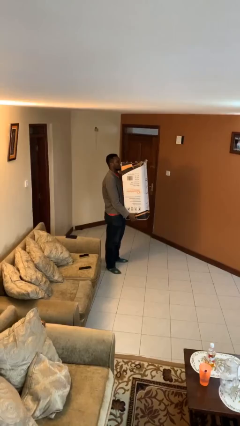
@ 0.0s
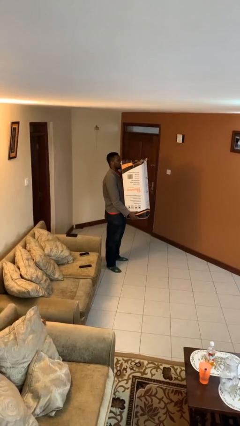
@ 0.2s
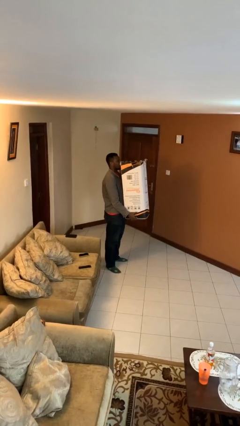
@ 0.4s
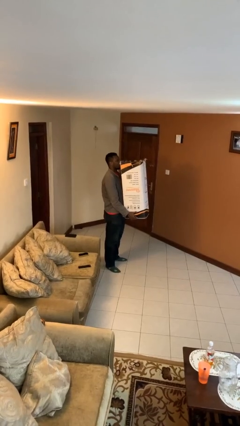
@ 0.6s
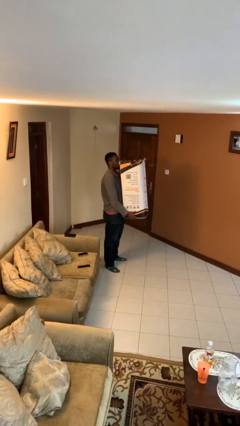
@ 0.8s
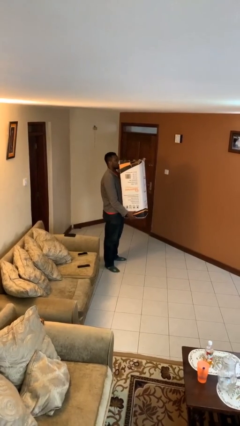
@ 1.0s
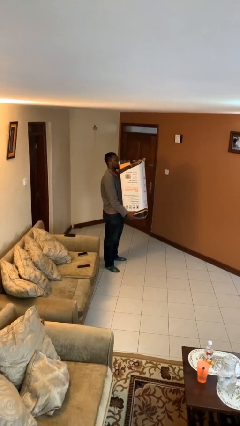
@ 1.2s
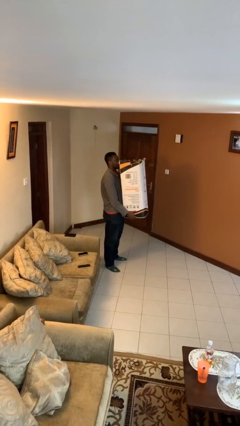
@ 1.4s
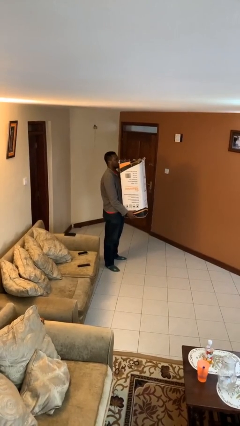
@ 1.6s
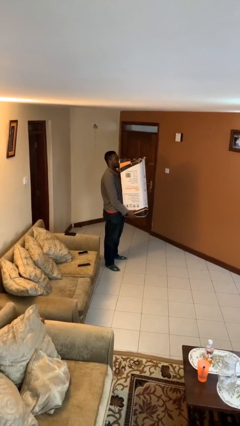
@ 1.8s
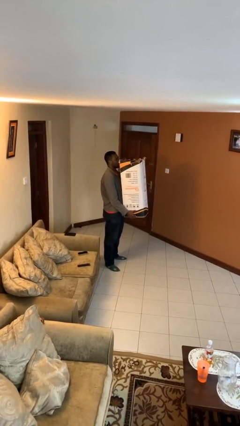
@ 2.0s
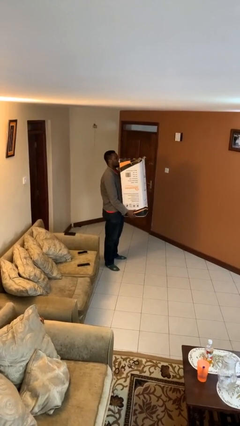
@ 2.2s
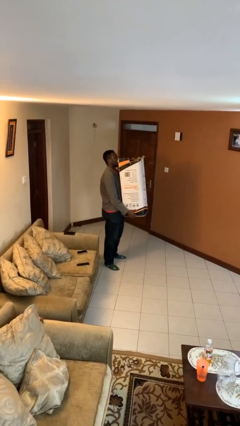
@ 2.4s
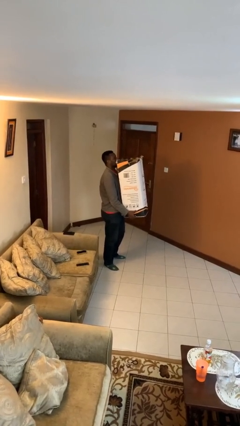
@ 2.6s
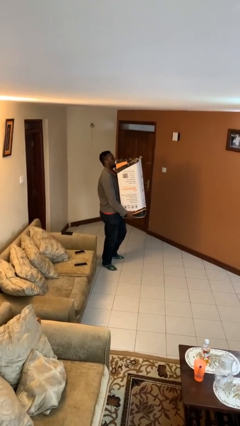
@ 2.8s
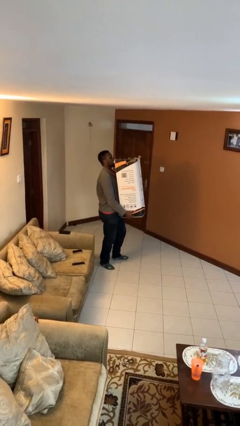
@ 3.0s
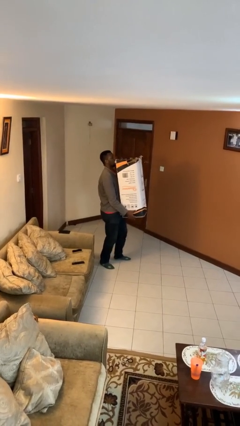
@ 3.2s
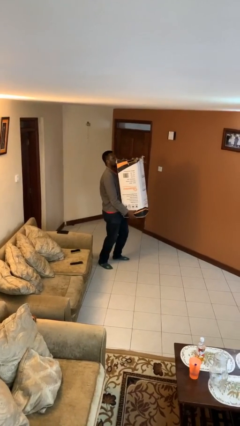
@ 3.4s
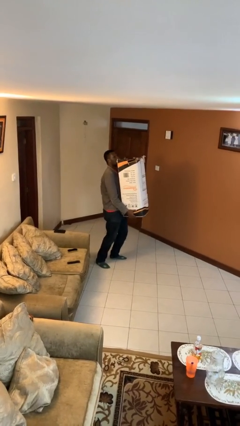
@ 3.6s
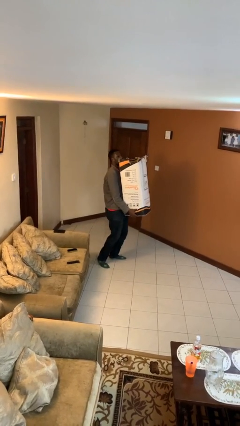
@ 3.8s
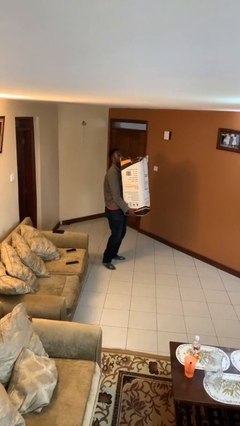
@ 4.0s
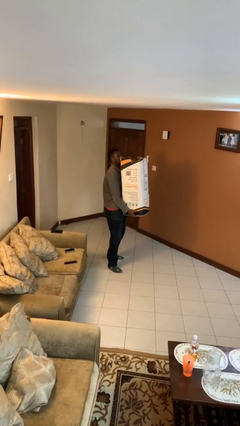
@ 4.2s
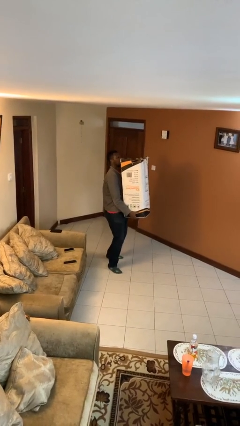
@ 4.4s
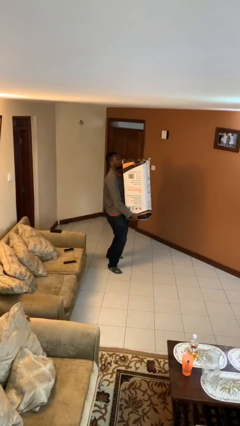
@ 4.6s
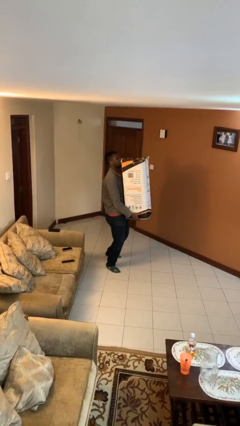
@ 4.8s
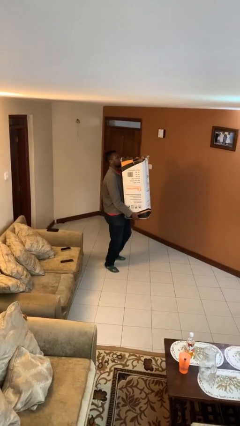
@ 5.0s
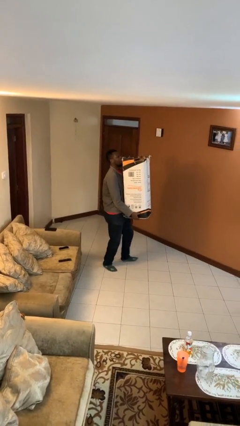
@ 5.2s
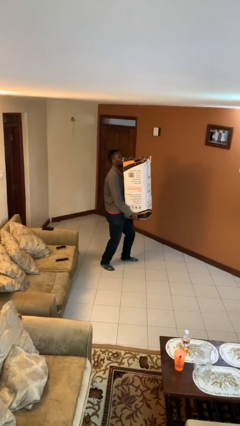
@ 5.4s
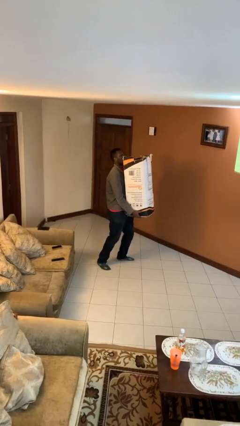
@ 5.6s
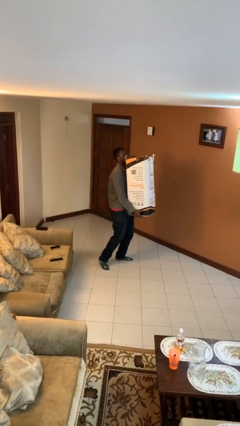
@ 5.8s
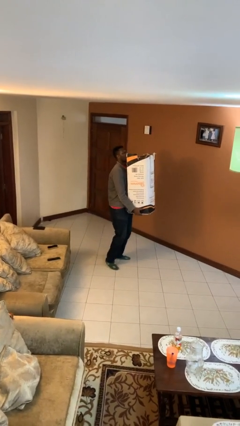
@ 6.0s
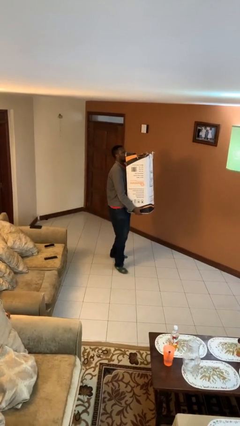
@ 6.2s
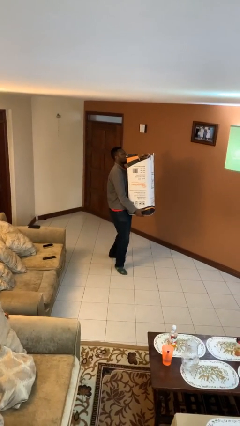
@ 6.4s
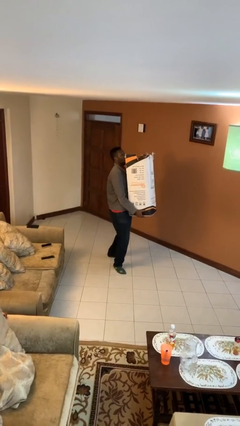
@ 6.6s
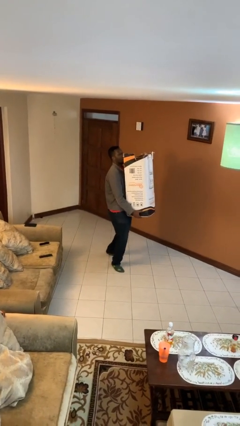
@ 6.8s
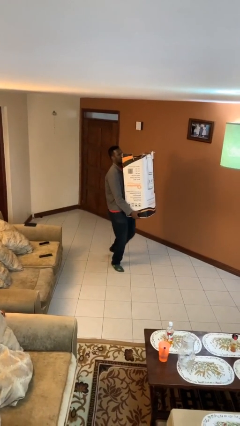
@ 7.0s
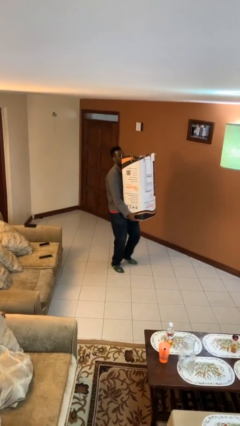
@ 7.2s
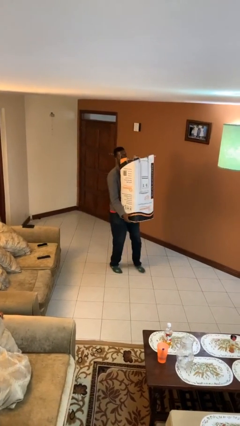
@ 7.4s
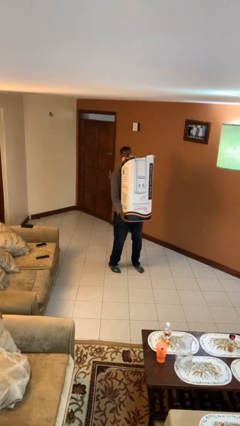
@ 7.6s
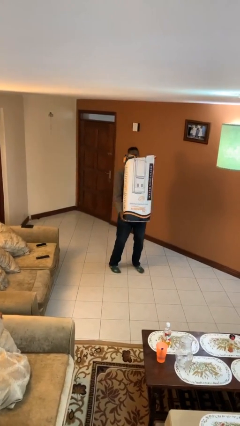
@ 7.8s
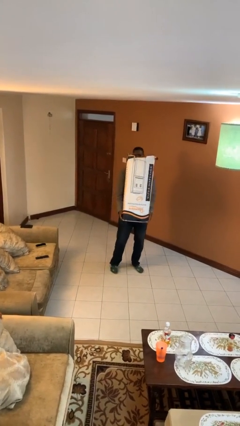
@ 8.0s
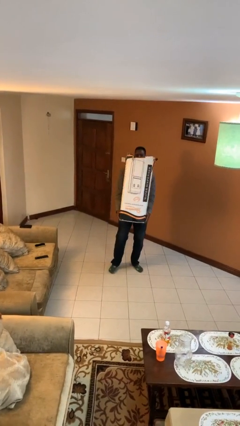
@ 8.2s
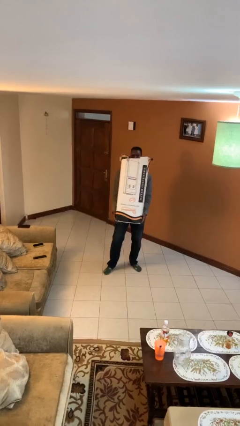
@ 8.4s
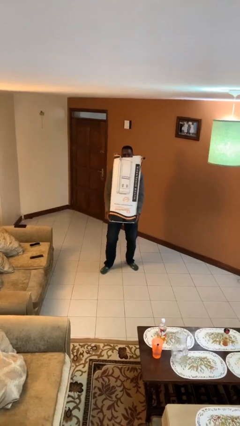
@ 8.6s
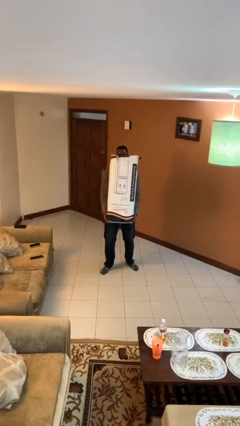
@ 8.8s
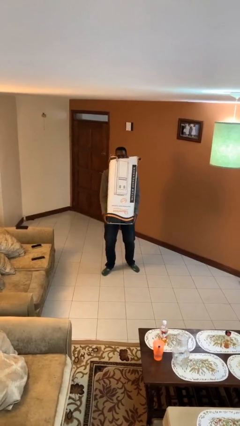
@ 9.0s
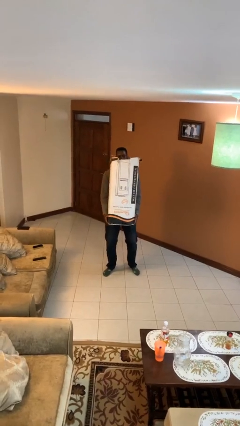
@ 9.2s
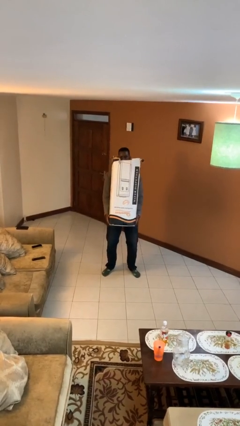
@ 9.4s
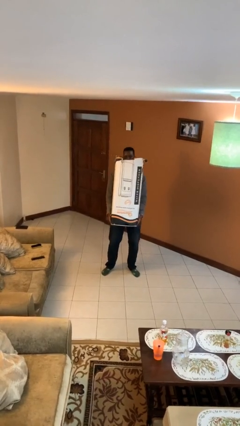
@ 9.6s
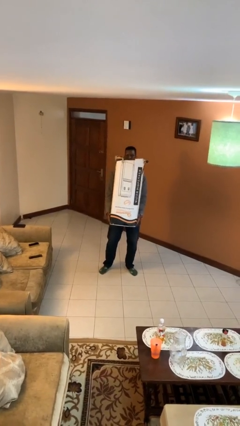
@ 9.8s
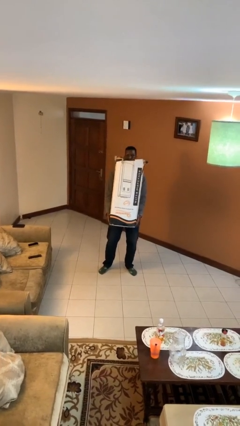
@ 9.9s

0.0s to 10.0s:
person carries heavy object

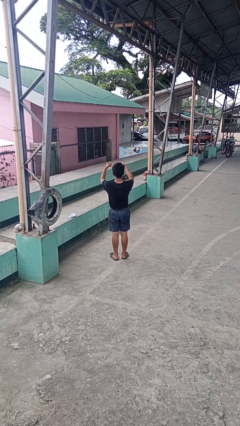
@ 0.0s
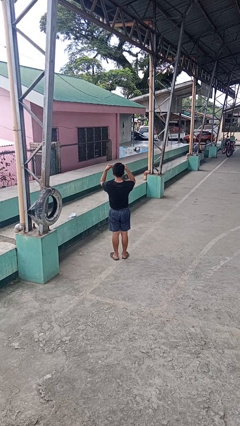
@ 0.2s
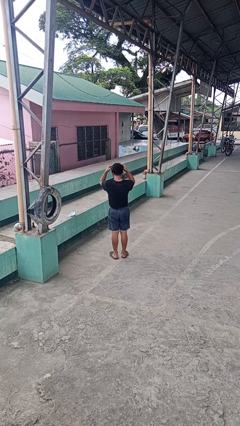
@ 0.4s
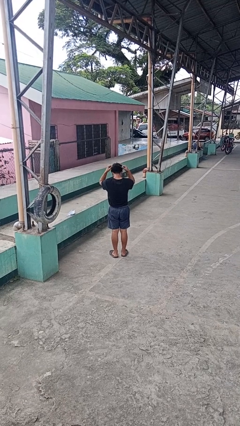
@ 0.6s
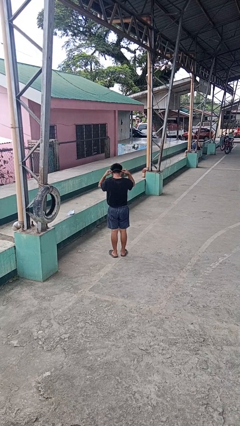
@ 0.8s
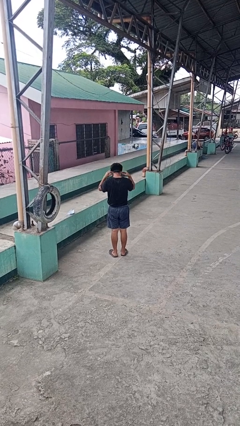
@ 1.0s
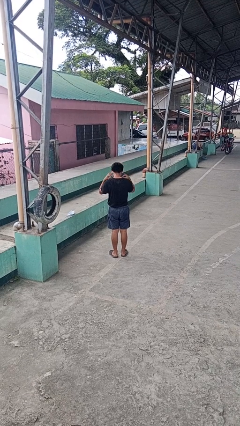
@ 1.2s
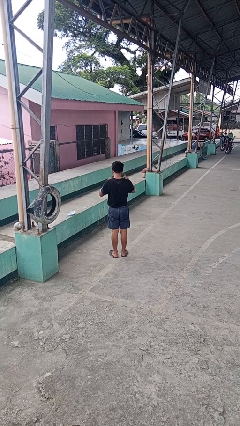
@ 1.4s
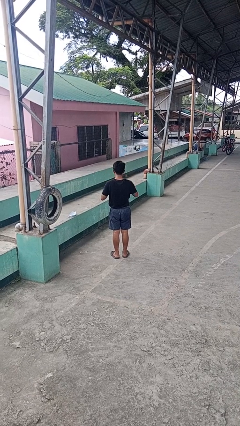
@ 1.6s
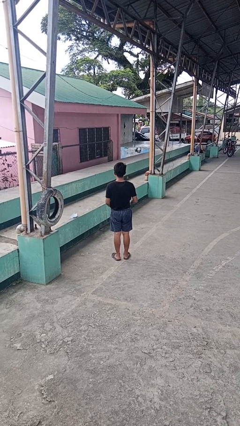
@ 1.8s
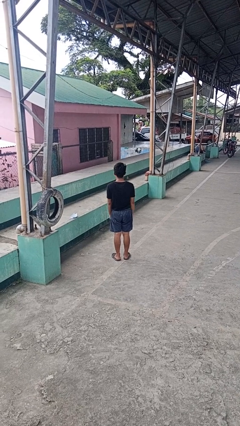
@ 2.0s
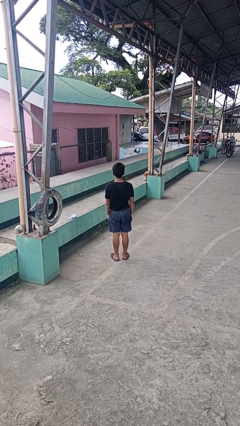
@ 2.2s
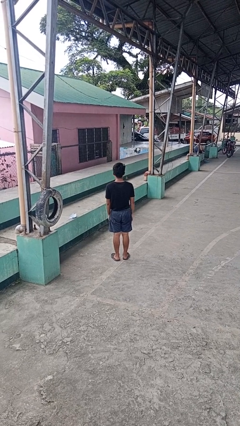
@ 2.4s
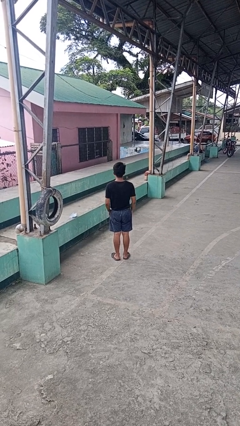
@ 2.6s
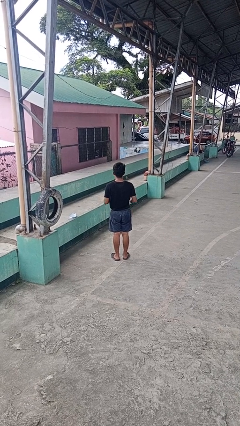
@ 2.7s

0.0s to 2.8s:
person puts on necklace

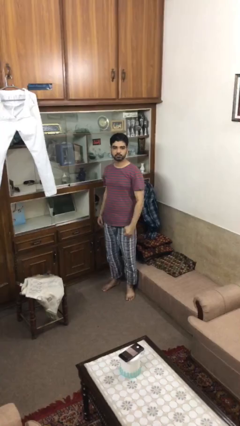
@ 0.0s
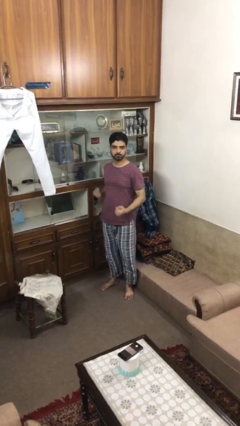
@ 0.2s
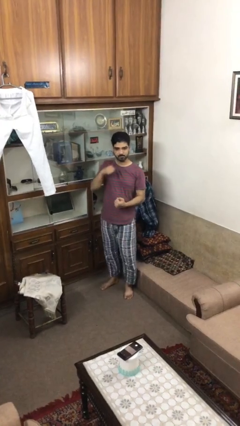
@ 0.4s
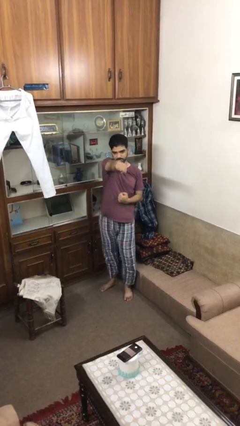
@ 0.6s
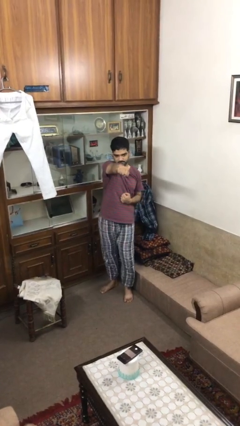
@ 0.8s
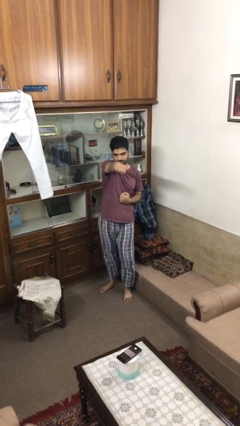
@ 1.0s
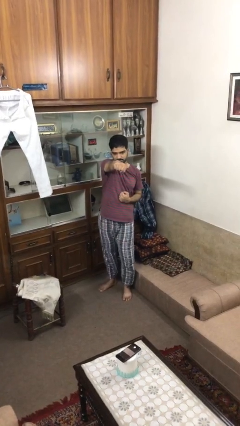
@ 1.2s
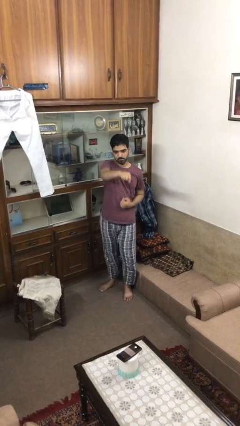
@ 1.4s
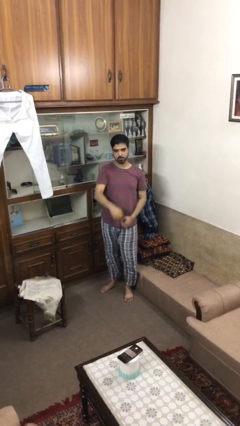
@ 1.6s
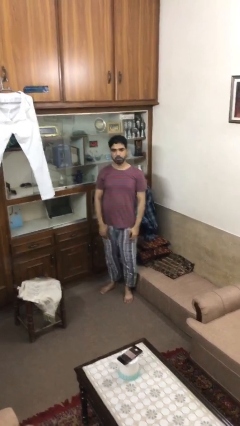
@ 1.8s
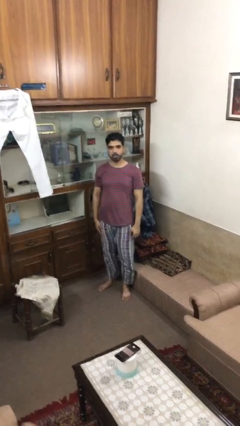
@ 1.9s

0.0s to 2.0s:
person punches

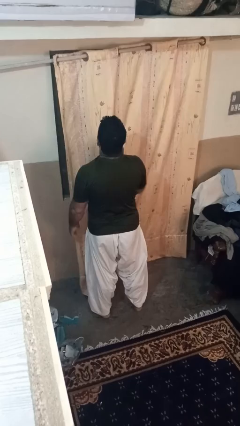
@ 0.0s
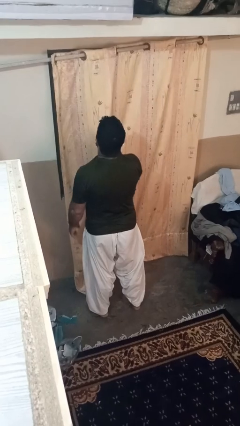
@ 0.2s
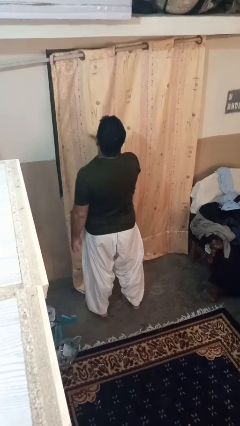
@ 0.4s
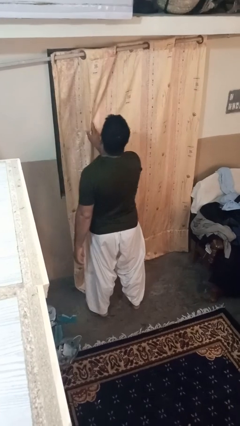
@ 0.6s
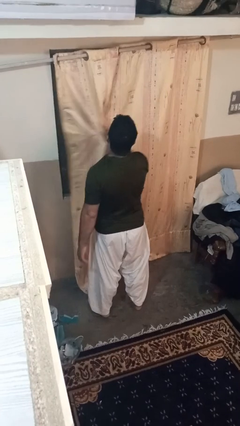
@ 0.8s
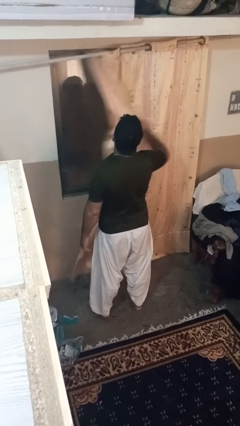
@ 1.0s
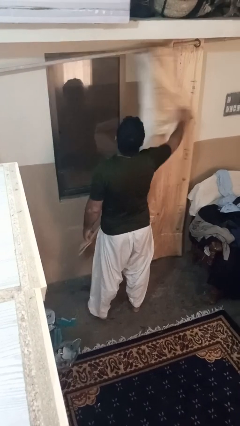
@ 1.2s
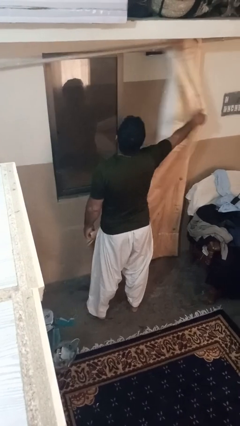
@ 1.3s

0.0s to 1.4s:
person opens curtains

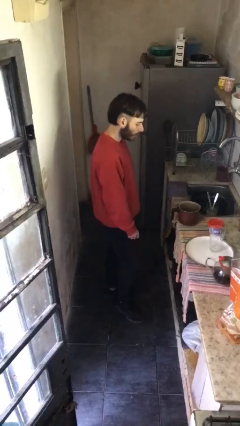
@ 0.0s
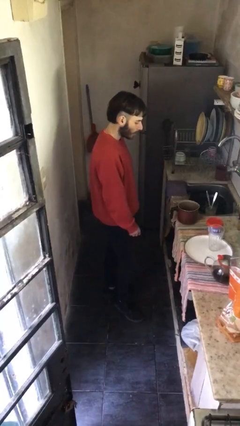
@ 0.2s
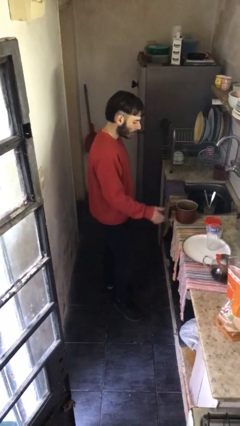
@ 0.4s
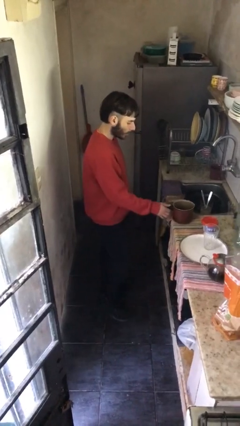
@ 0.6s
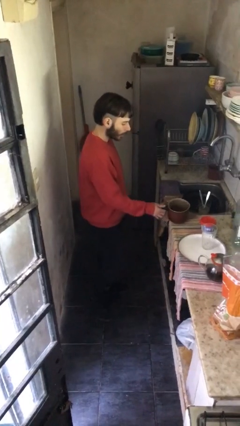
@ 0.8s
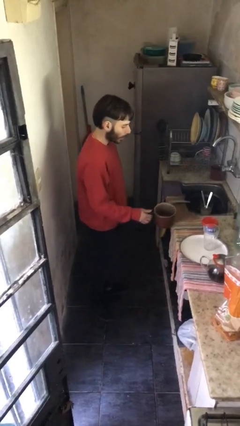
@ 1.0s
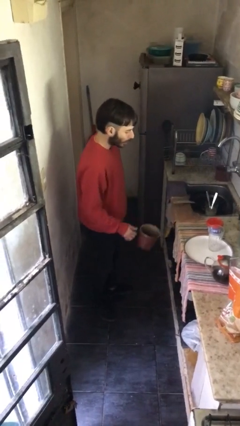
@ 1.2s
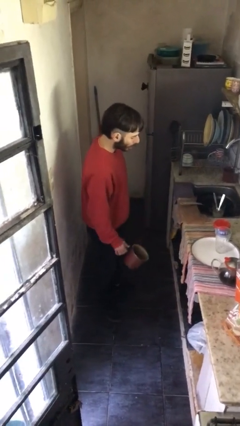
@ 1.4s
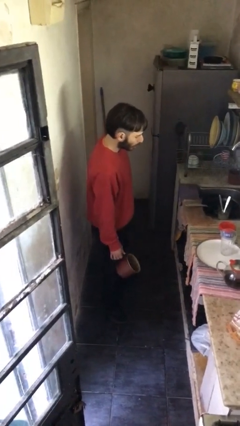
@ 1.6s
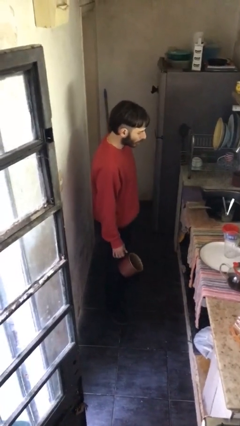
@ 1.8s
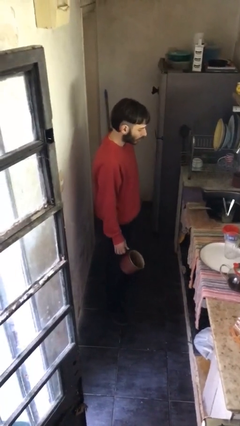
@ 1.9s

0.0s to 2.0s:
person picks up object from countertop
